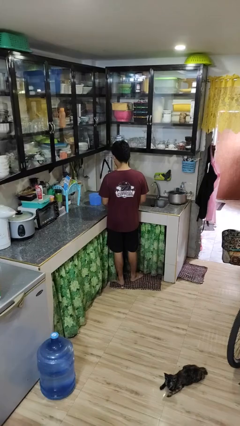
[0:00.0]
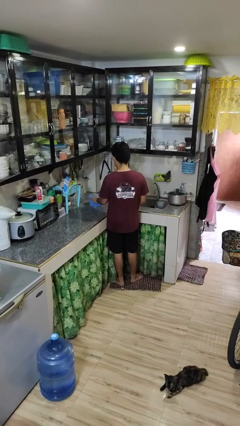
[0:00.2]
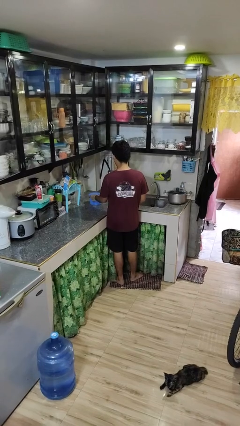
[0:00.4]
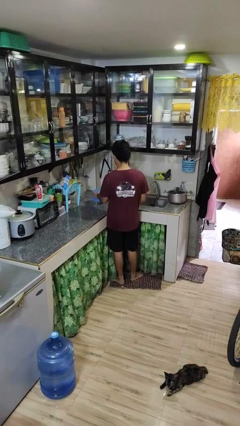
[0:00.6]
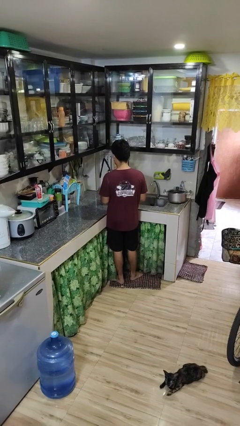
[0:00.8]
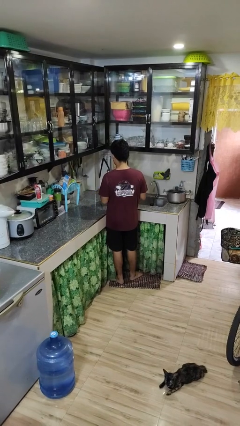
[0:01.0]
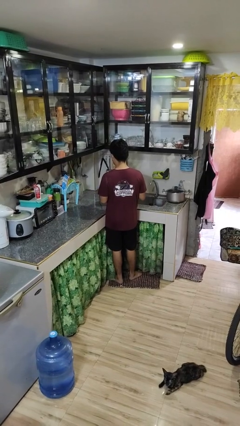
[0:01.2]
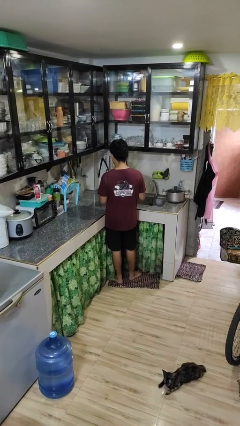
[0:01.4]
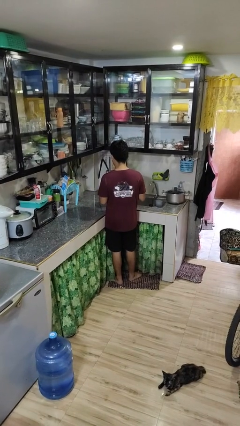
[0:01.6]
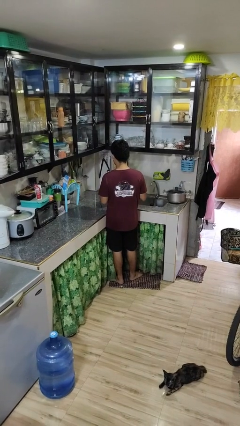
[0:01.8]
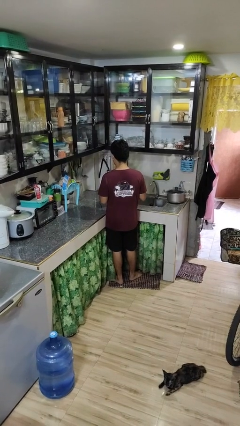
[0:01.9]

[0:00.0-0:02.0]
person picks up object from countertop

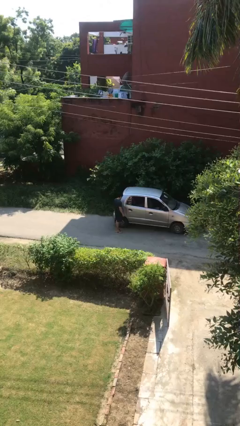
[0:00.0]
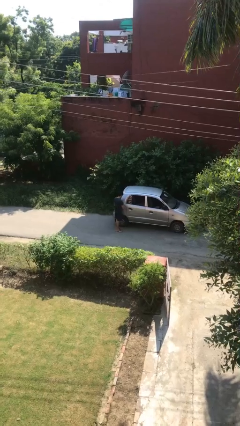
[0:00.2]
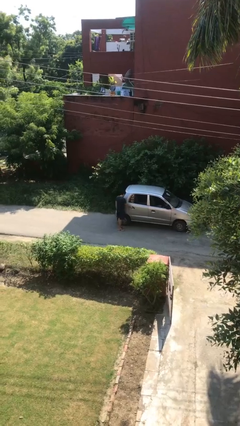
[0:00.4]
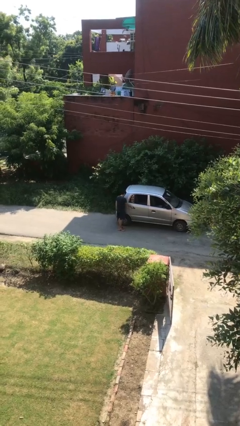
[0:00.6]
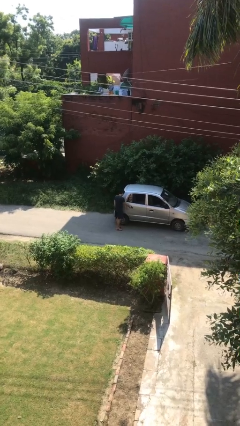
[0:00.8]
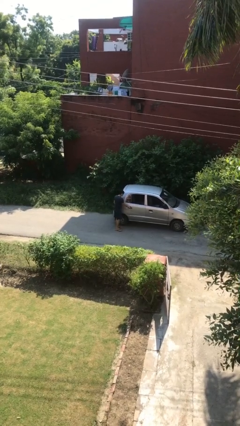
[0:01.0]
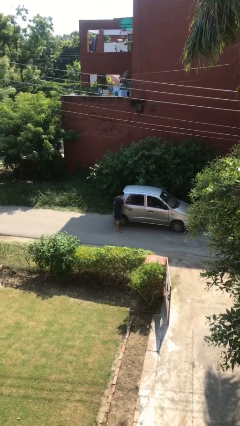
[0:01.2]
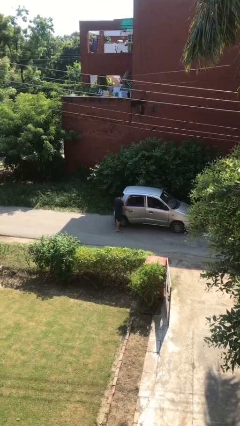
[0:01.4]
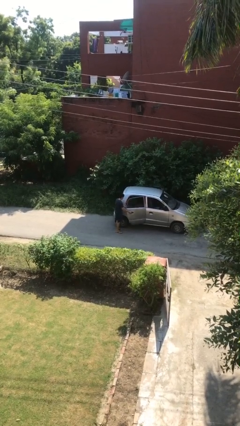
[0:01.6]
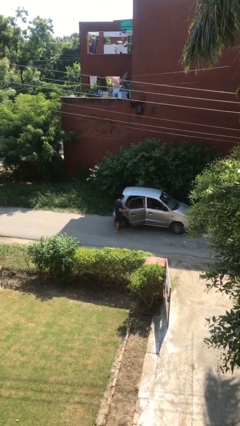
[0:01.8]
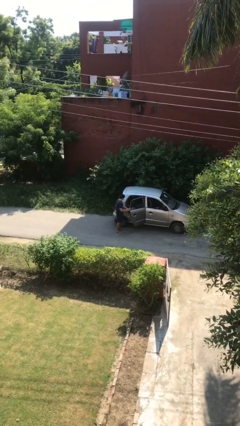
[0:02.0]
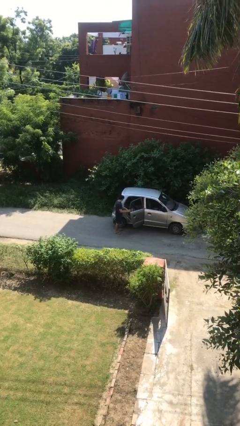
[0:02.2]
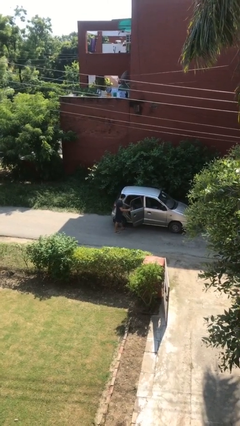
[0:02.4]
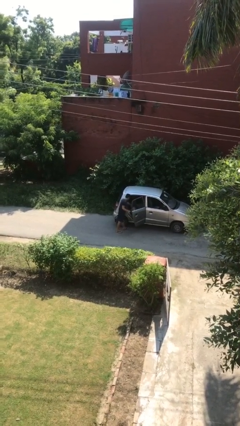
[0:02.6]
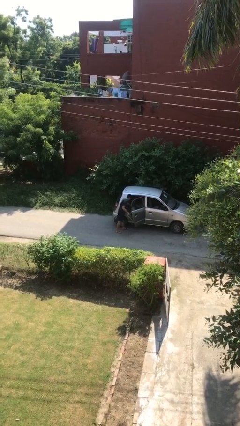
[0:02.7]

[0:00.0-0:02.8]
person opens car door

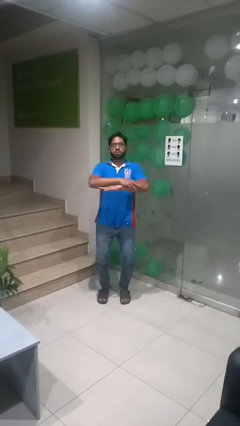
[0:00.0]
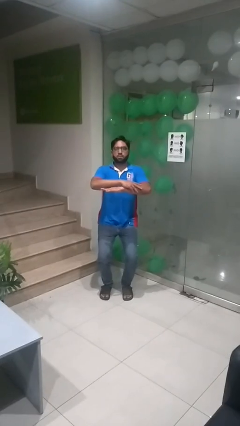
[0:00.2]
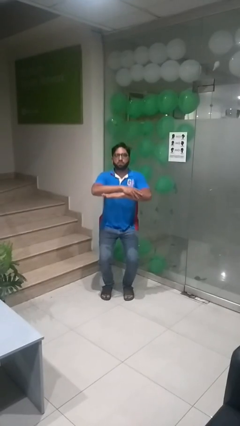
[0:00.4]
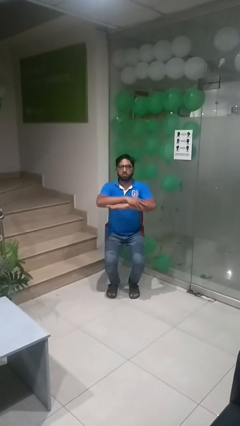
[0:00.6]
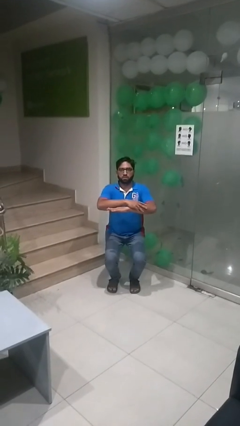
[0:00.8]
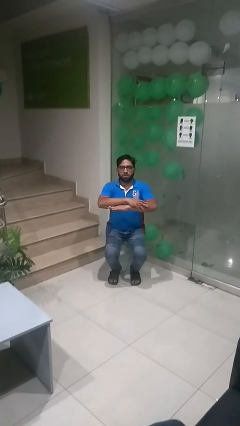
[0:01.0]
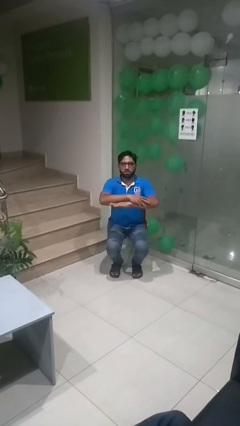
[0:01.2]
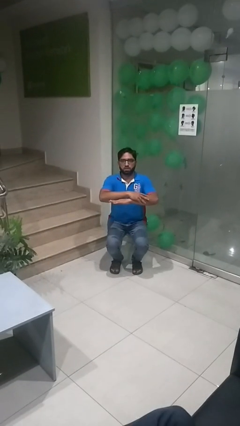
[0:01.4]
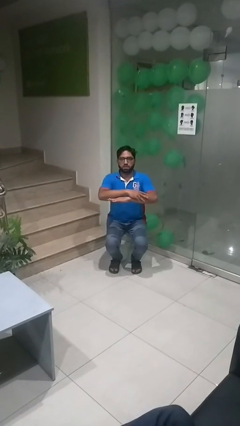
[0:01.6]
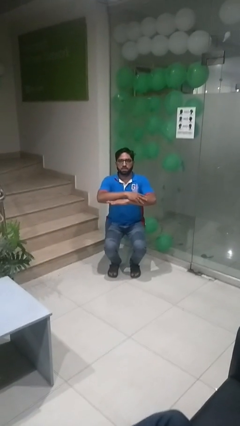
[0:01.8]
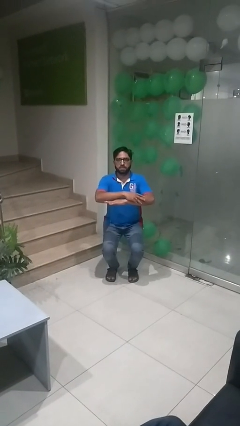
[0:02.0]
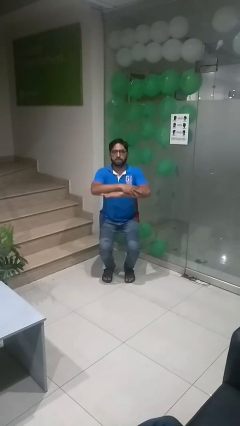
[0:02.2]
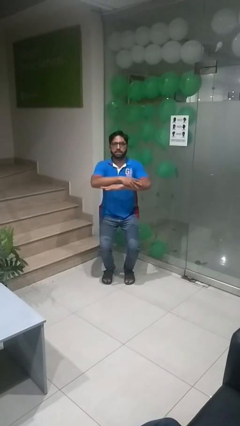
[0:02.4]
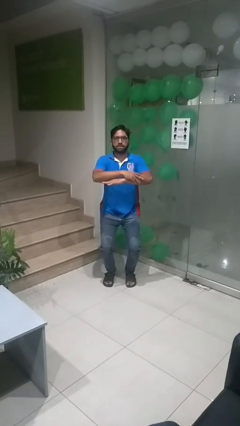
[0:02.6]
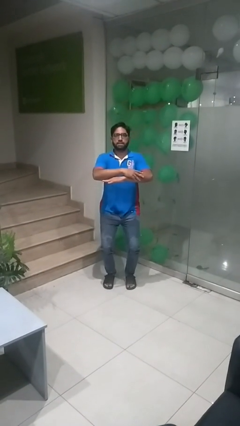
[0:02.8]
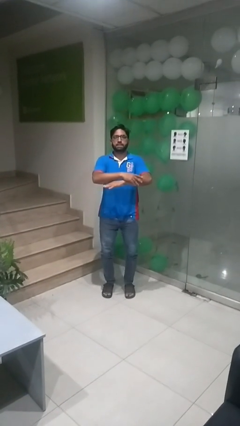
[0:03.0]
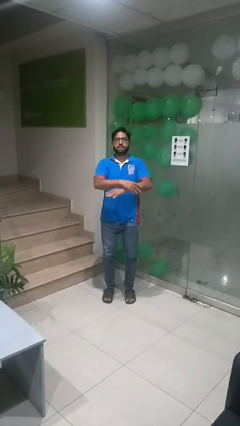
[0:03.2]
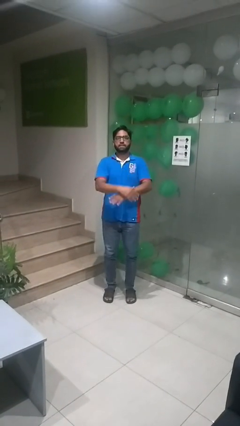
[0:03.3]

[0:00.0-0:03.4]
person squats

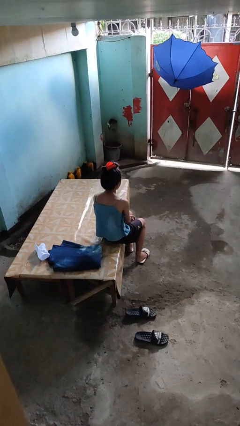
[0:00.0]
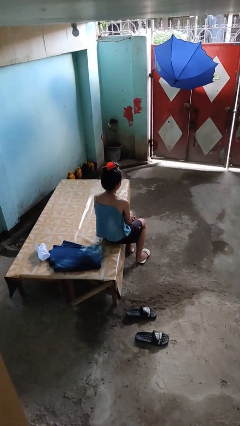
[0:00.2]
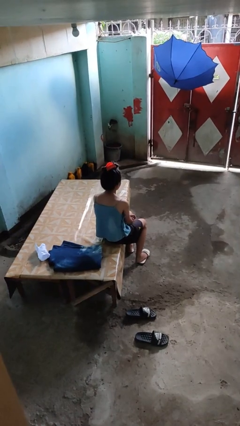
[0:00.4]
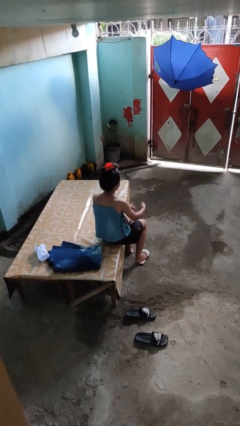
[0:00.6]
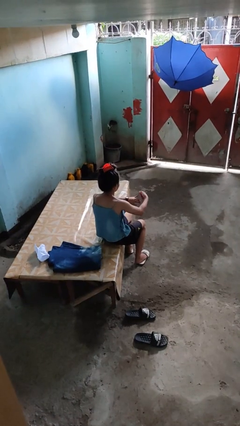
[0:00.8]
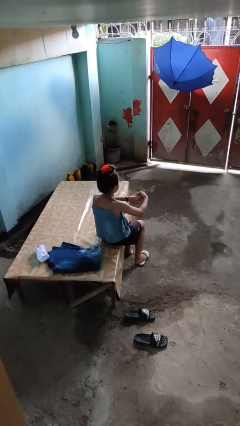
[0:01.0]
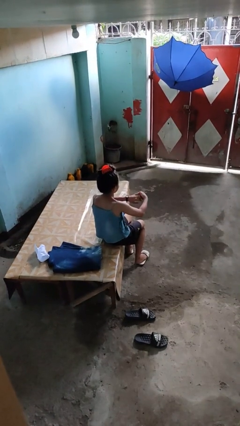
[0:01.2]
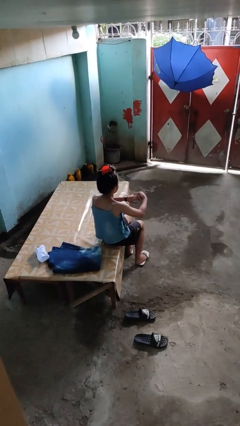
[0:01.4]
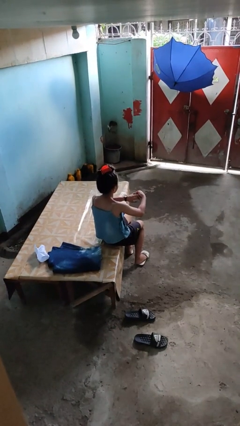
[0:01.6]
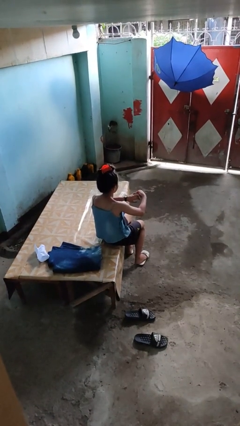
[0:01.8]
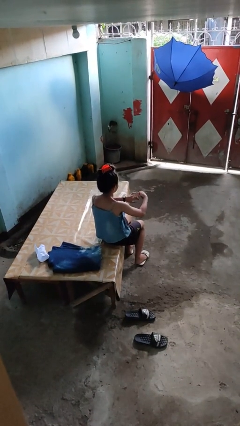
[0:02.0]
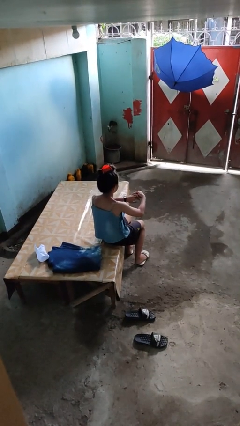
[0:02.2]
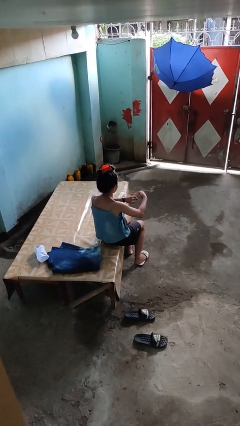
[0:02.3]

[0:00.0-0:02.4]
person files fingernails

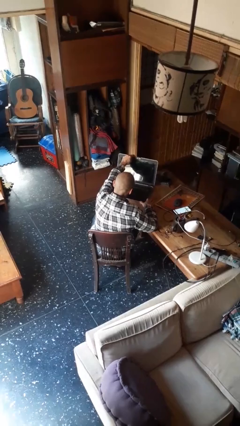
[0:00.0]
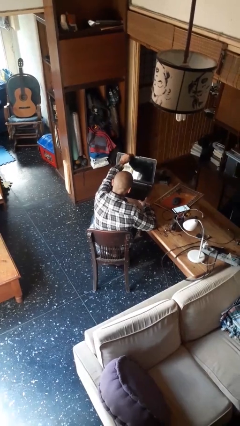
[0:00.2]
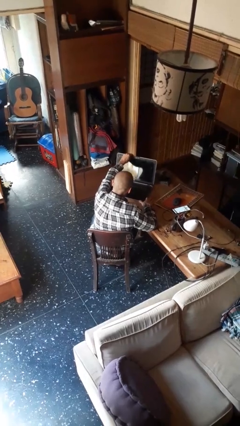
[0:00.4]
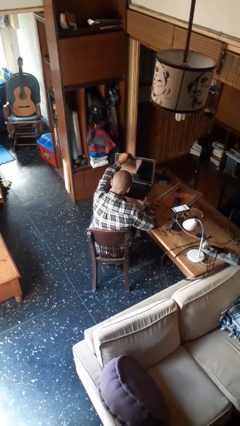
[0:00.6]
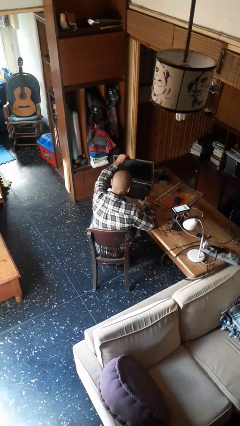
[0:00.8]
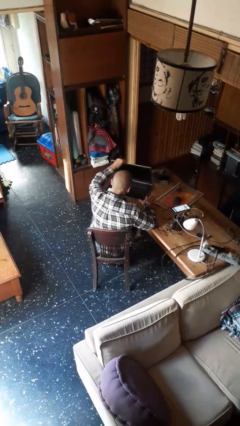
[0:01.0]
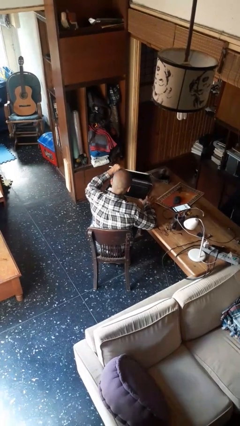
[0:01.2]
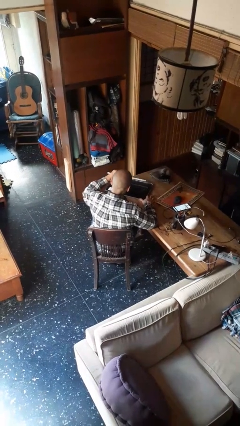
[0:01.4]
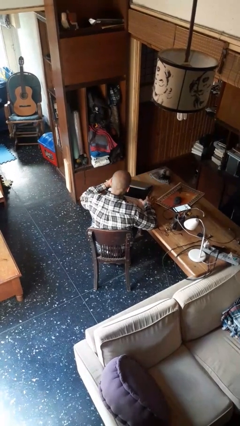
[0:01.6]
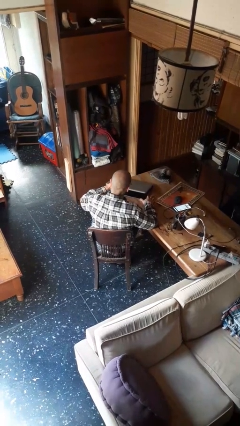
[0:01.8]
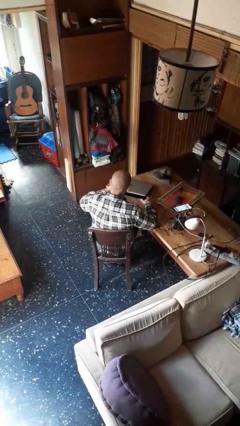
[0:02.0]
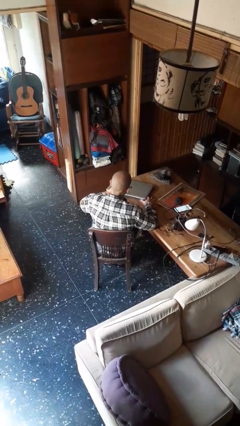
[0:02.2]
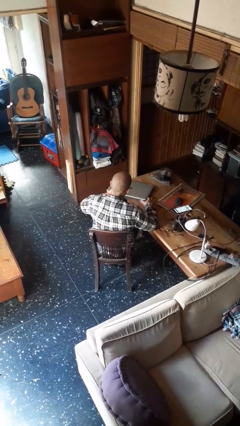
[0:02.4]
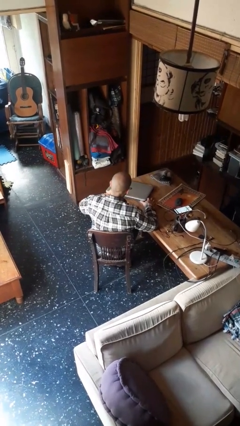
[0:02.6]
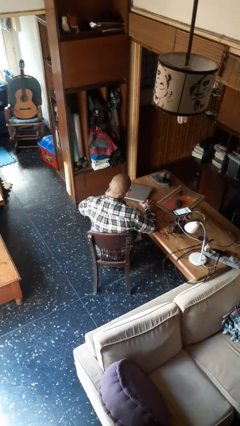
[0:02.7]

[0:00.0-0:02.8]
person closes laptop

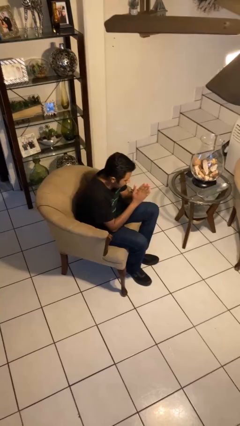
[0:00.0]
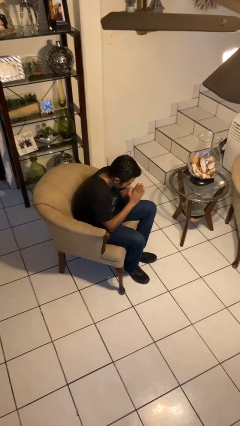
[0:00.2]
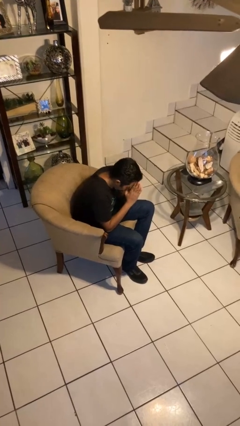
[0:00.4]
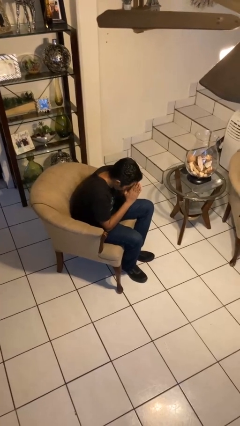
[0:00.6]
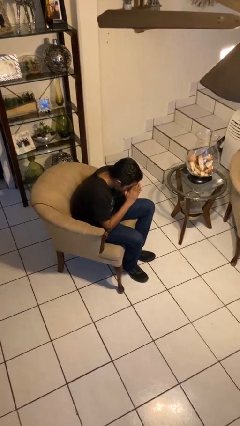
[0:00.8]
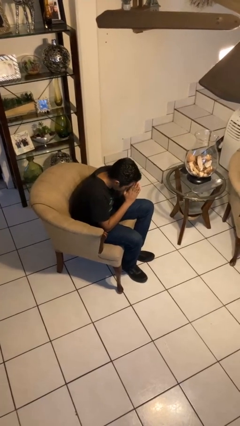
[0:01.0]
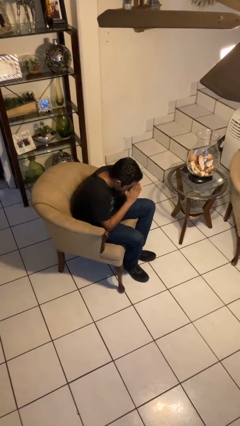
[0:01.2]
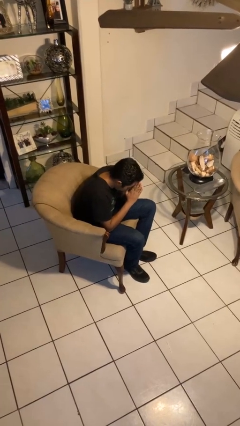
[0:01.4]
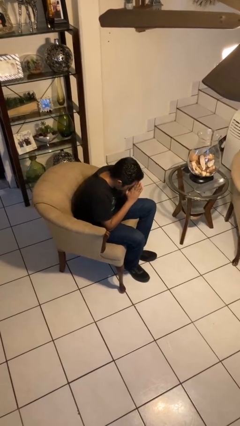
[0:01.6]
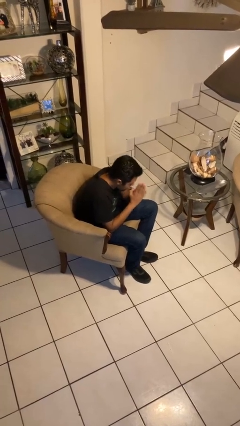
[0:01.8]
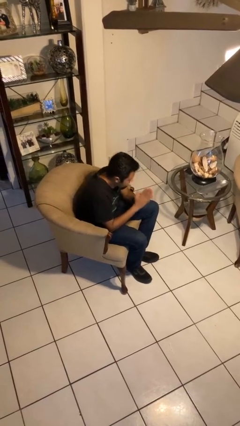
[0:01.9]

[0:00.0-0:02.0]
person prays

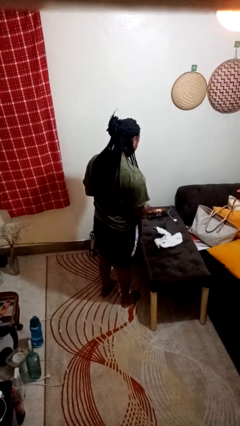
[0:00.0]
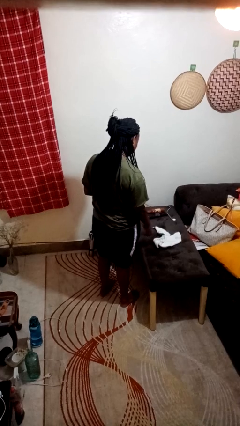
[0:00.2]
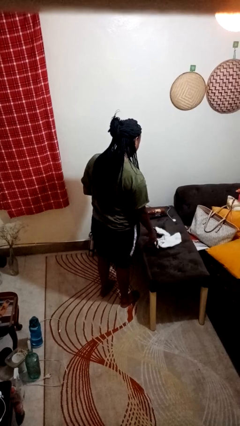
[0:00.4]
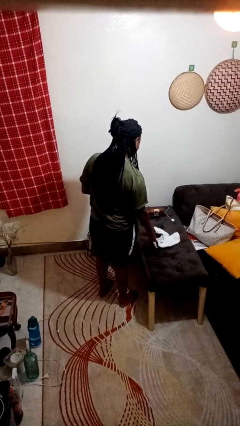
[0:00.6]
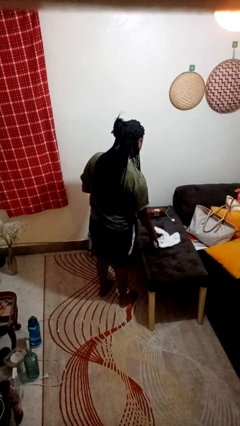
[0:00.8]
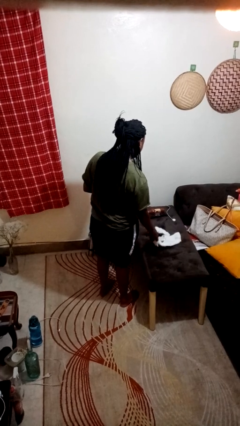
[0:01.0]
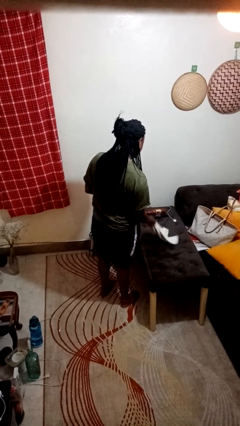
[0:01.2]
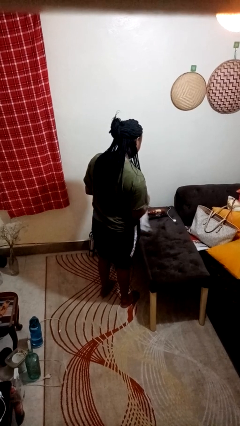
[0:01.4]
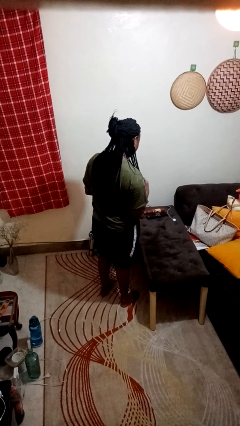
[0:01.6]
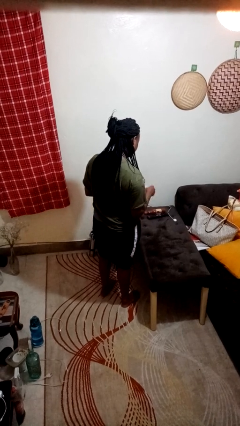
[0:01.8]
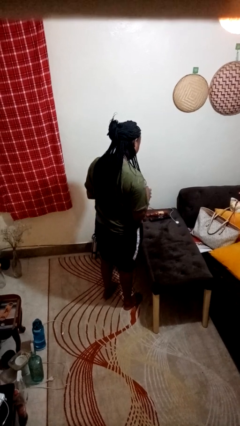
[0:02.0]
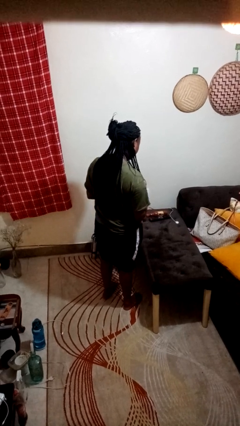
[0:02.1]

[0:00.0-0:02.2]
person picks up object from table
